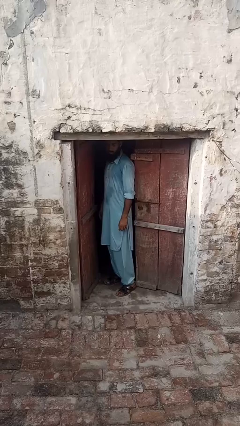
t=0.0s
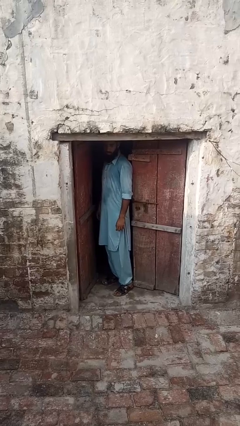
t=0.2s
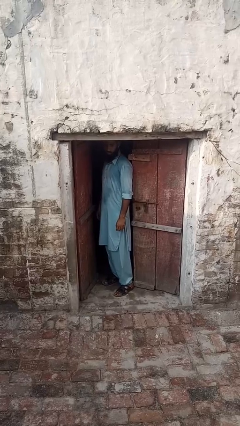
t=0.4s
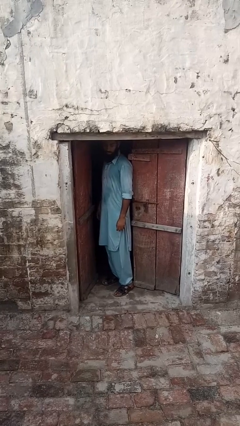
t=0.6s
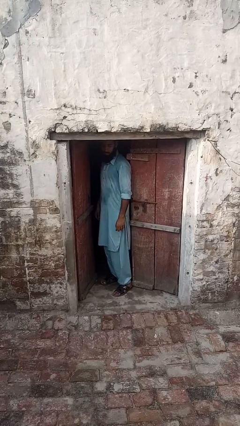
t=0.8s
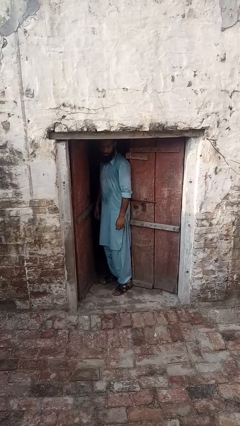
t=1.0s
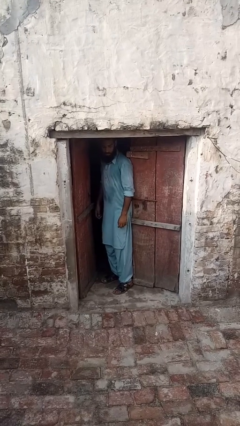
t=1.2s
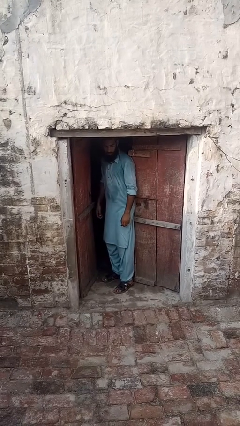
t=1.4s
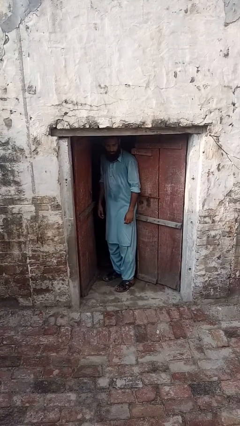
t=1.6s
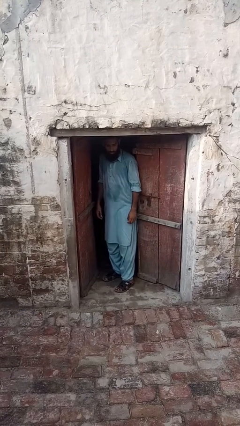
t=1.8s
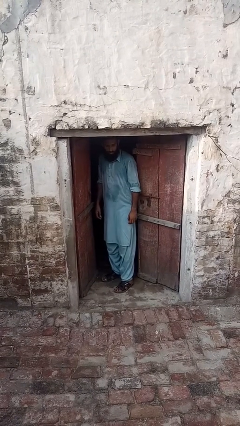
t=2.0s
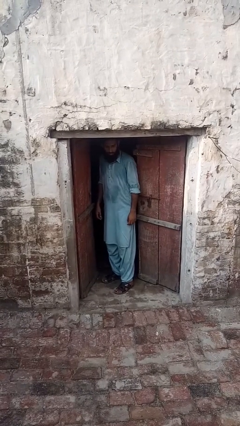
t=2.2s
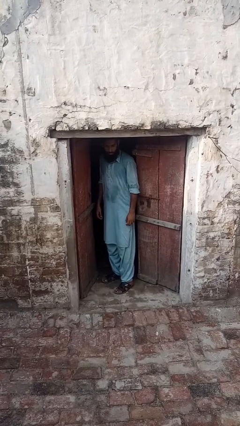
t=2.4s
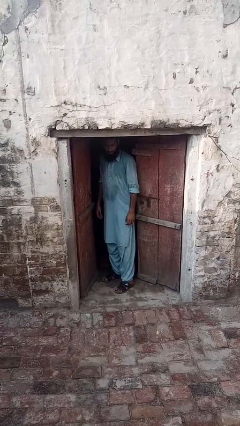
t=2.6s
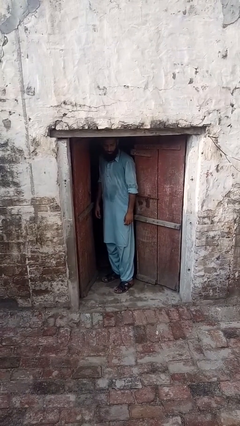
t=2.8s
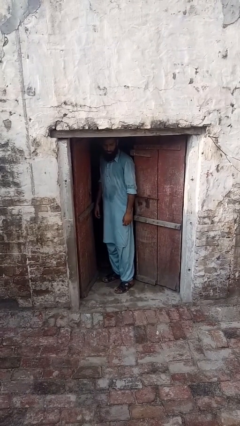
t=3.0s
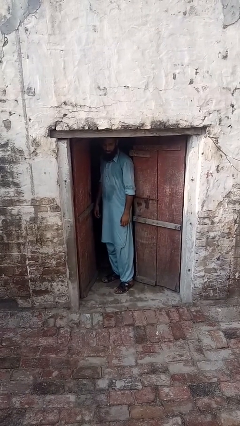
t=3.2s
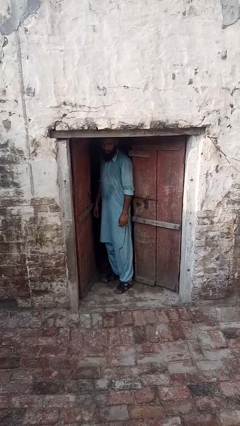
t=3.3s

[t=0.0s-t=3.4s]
person opens facility door

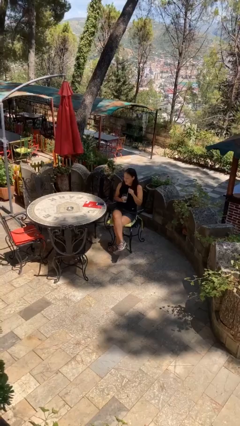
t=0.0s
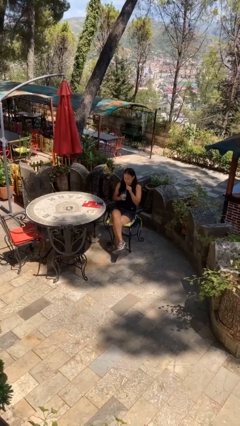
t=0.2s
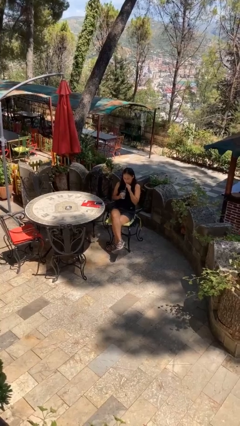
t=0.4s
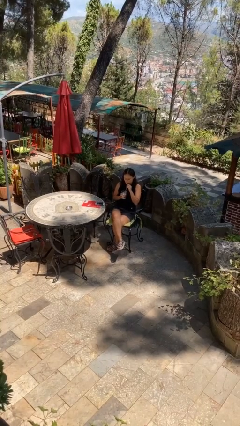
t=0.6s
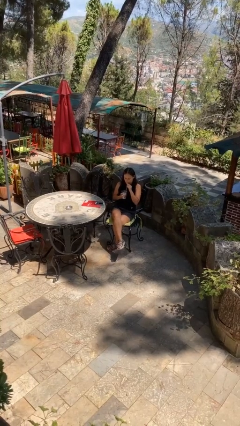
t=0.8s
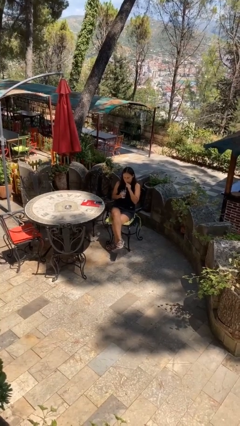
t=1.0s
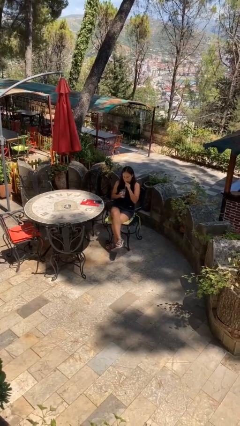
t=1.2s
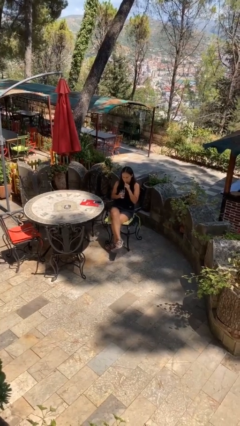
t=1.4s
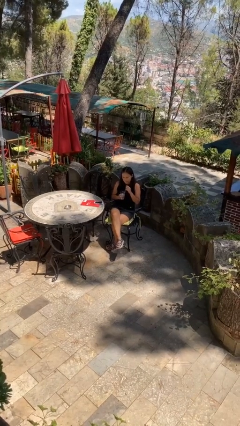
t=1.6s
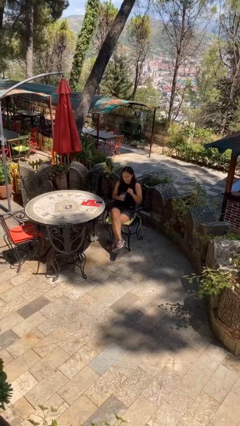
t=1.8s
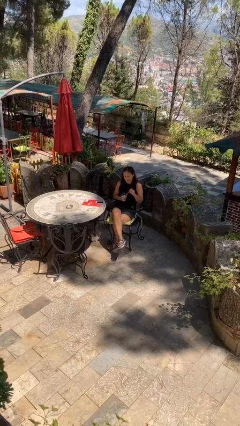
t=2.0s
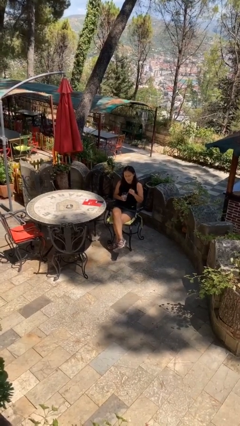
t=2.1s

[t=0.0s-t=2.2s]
person drinks from straw

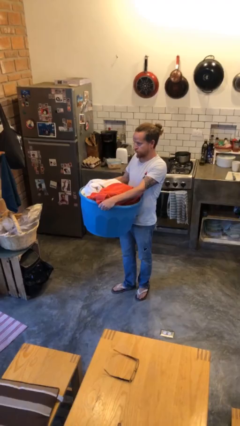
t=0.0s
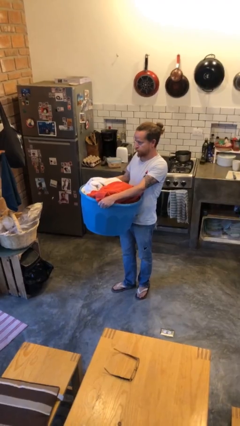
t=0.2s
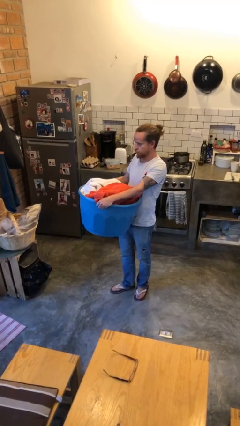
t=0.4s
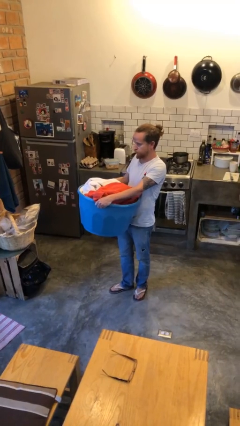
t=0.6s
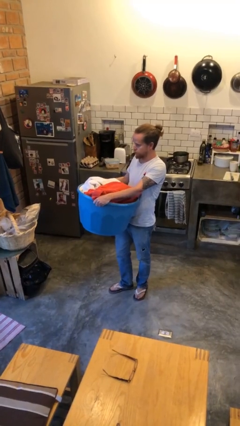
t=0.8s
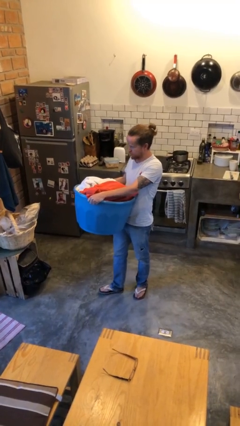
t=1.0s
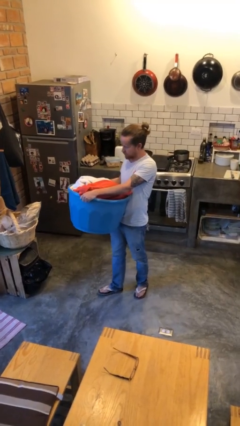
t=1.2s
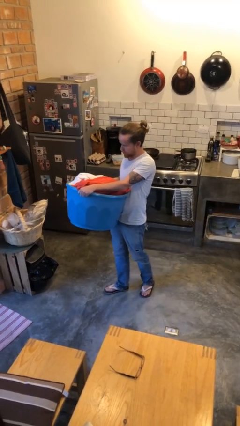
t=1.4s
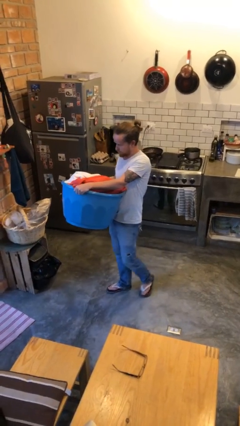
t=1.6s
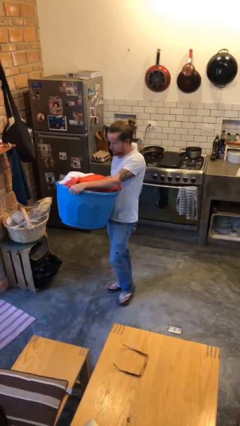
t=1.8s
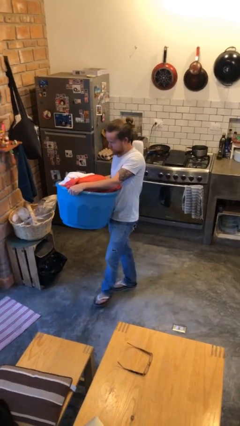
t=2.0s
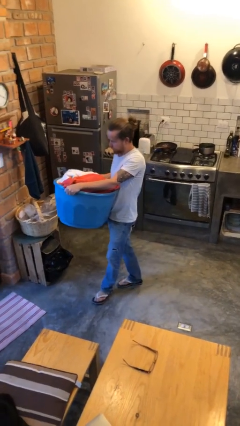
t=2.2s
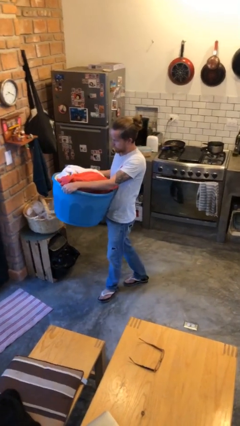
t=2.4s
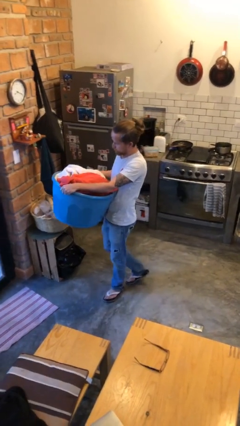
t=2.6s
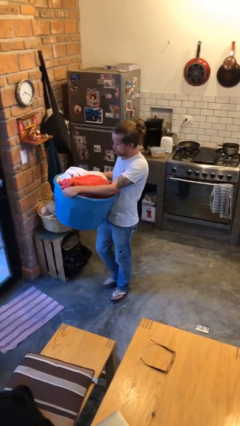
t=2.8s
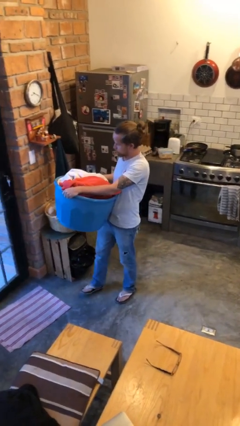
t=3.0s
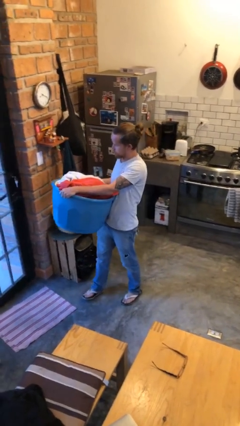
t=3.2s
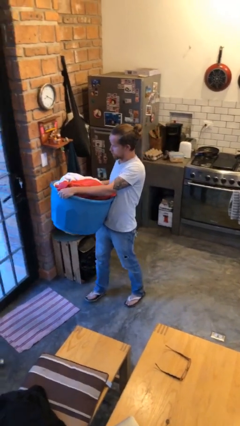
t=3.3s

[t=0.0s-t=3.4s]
person carries laundry basket

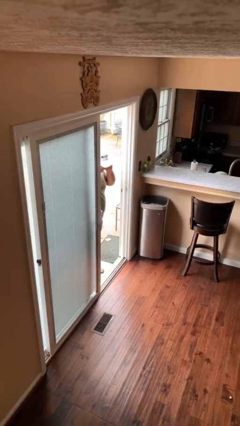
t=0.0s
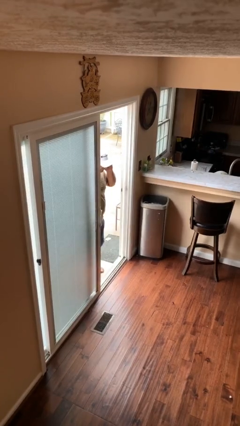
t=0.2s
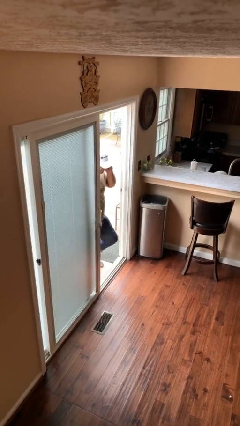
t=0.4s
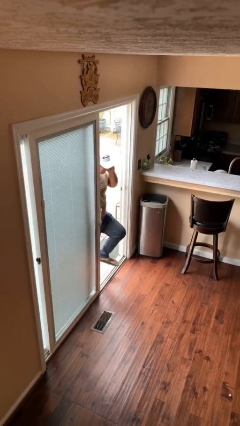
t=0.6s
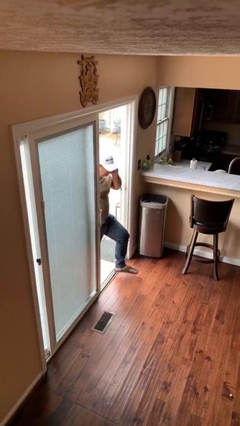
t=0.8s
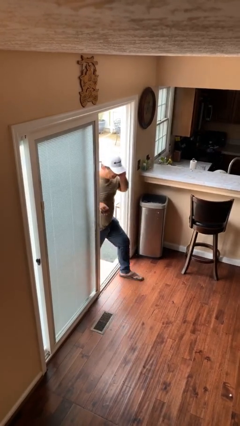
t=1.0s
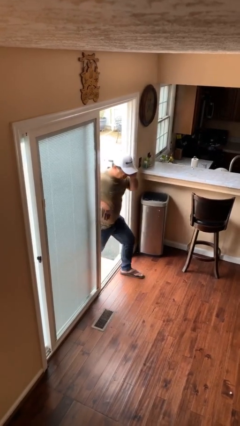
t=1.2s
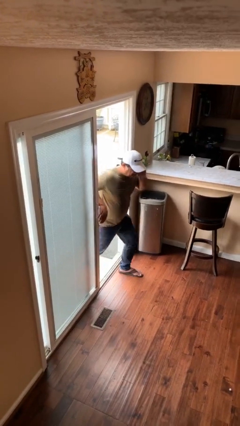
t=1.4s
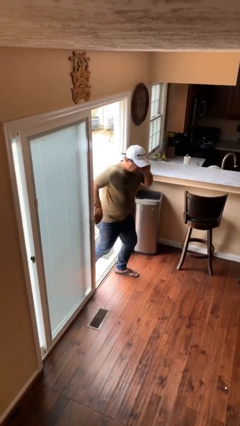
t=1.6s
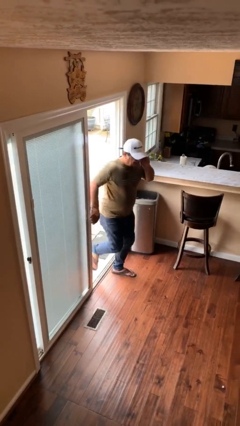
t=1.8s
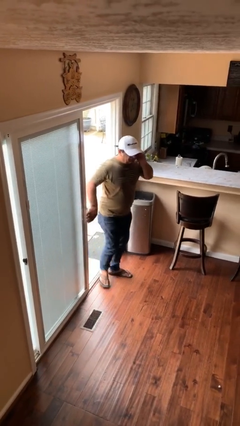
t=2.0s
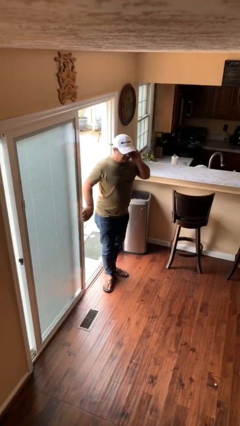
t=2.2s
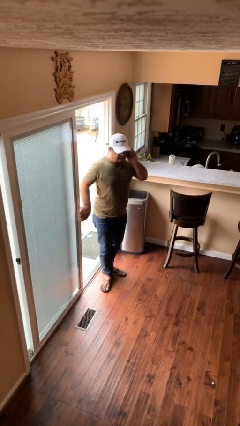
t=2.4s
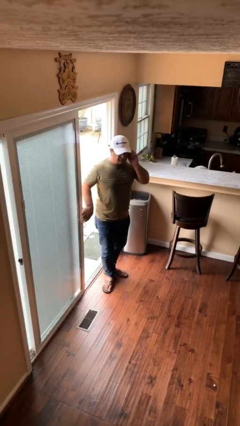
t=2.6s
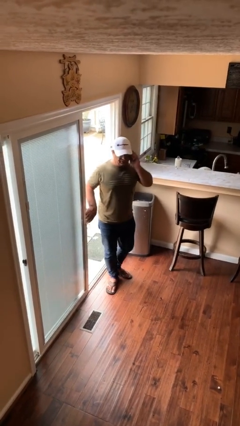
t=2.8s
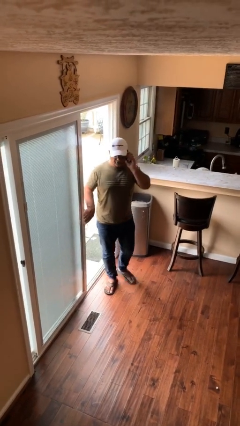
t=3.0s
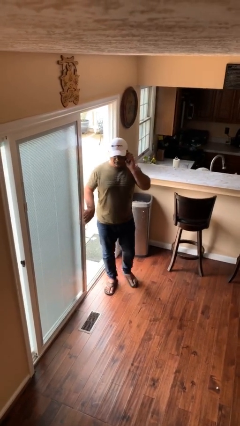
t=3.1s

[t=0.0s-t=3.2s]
person enters scene through structure

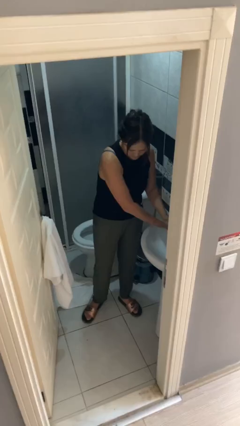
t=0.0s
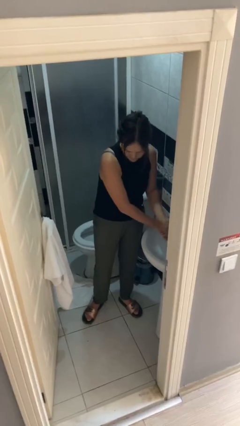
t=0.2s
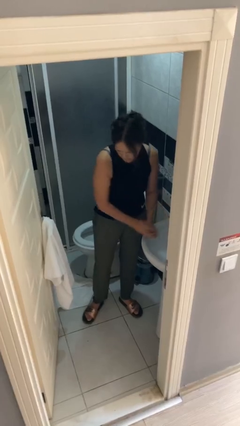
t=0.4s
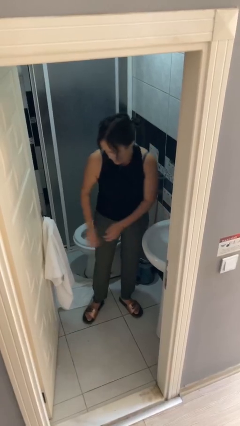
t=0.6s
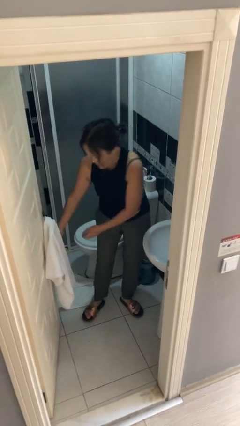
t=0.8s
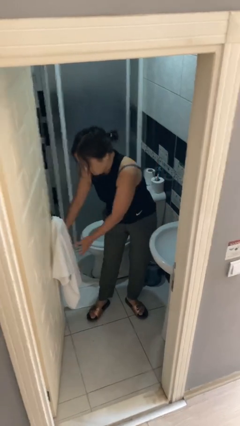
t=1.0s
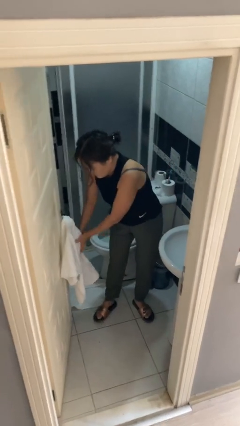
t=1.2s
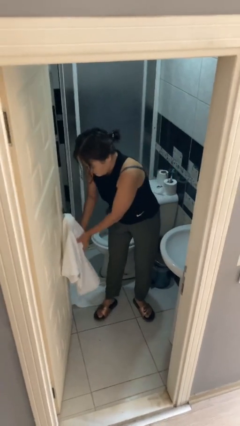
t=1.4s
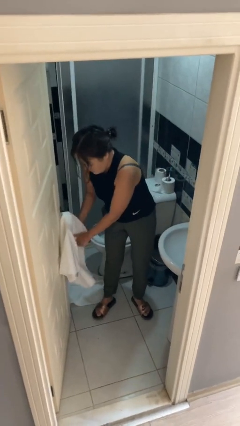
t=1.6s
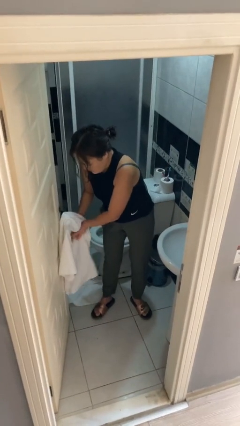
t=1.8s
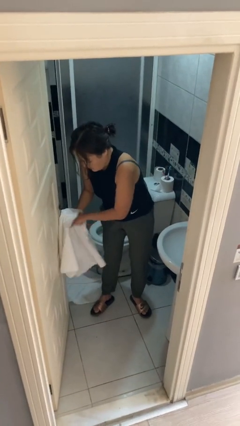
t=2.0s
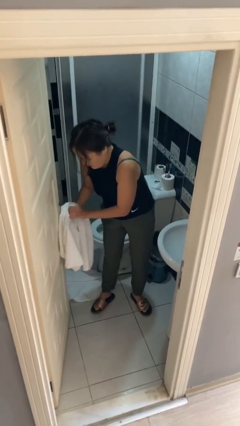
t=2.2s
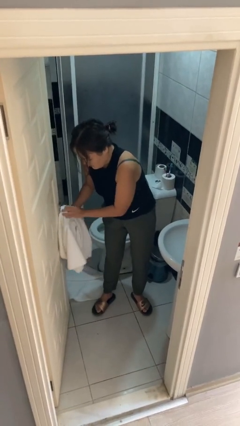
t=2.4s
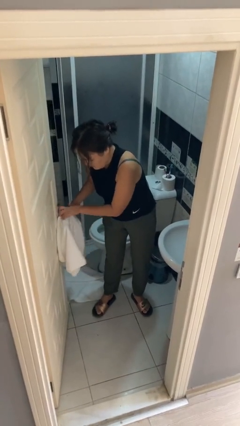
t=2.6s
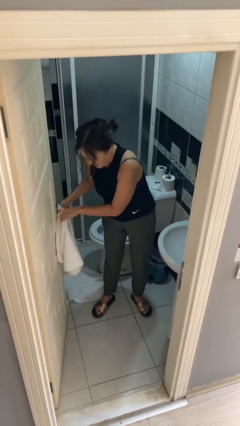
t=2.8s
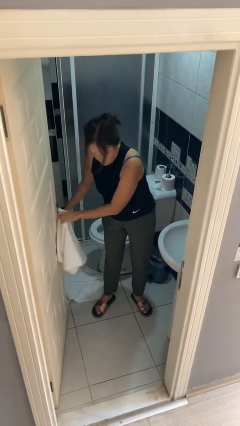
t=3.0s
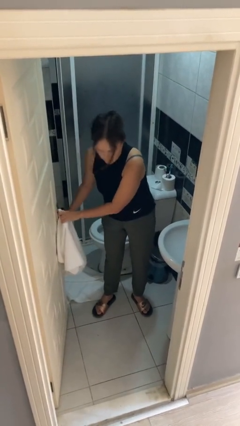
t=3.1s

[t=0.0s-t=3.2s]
person dries hands with towel

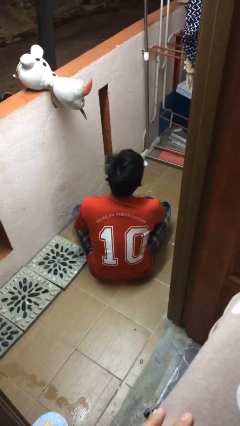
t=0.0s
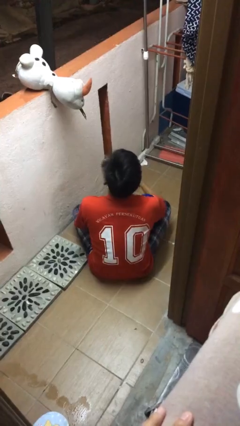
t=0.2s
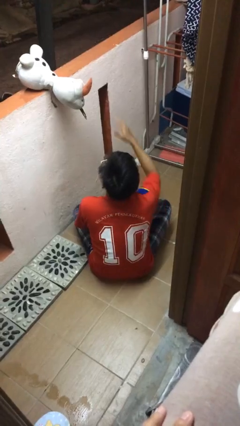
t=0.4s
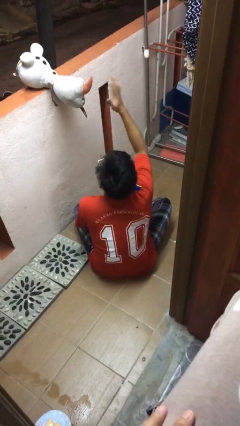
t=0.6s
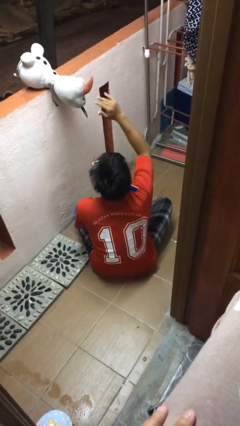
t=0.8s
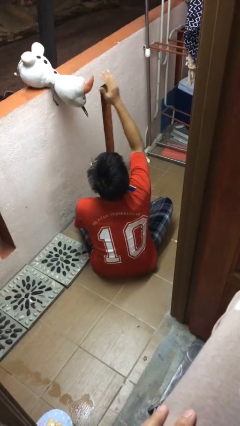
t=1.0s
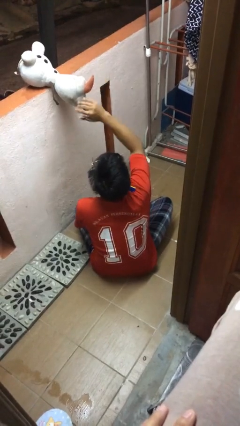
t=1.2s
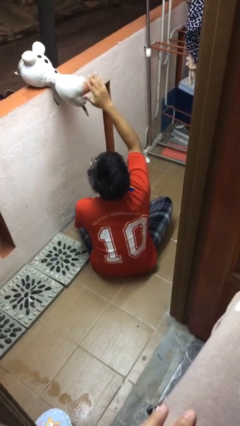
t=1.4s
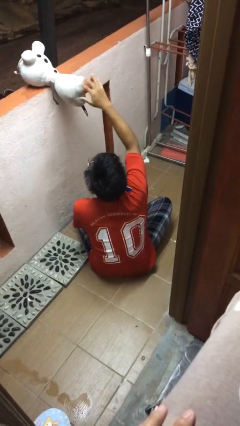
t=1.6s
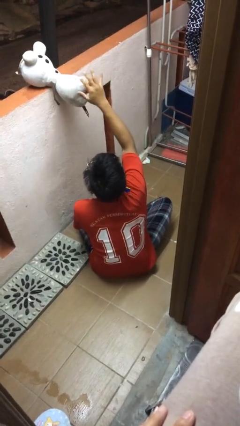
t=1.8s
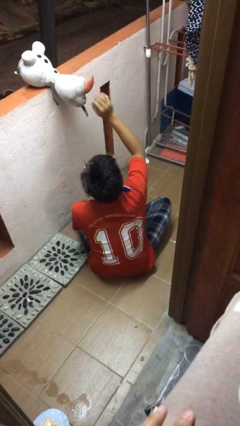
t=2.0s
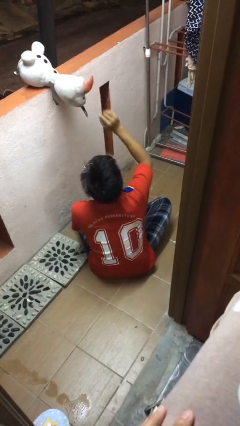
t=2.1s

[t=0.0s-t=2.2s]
person waves hand over object
